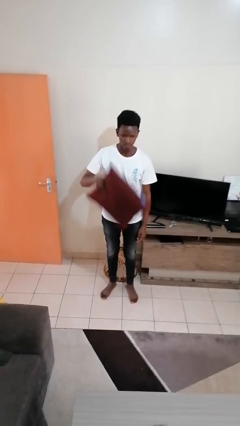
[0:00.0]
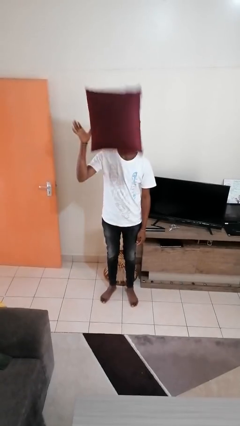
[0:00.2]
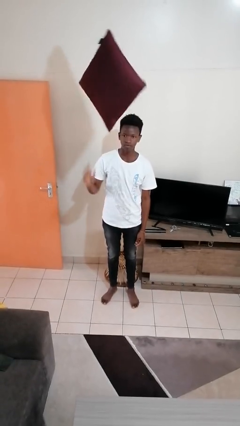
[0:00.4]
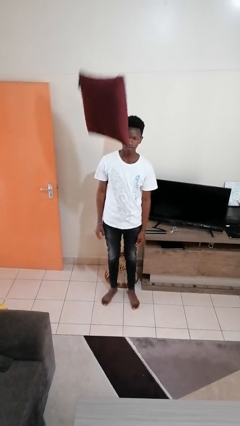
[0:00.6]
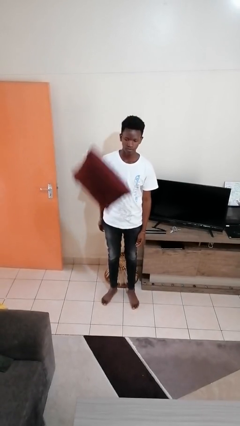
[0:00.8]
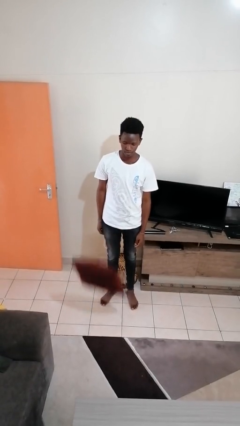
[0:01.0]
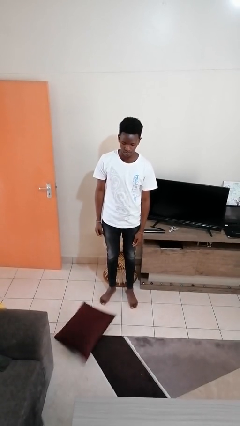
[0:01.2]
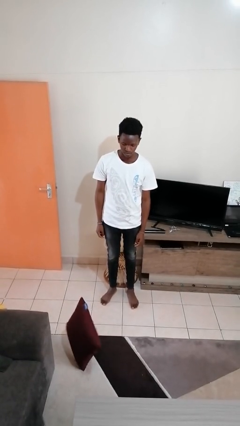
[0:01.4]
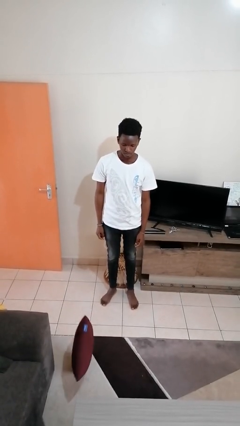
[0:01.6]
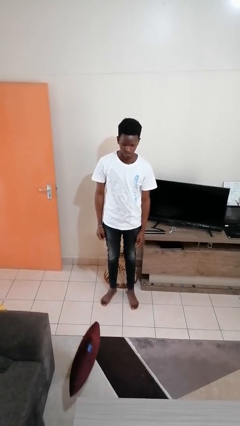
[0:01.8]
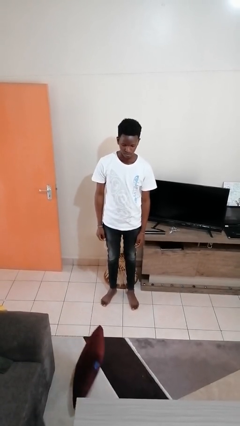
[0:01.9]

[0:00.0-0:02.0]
person throws object into air

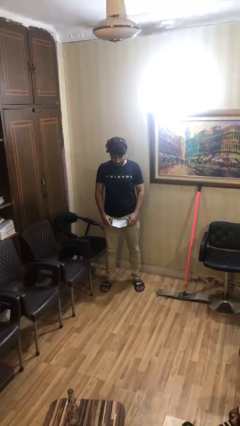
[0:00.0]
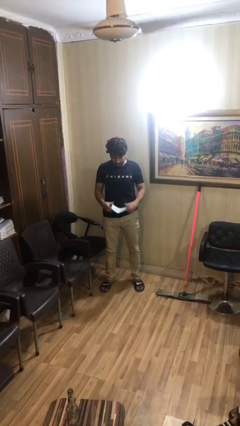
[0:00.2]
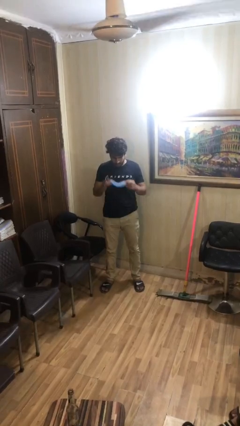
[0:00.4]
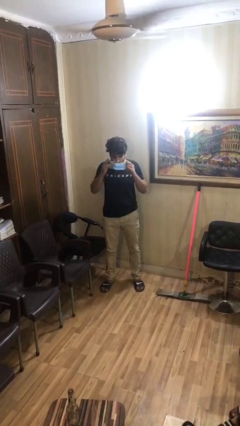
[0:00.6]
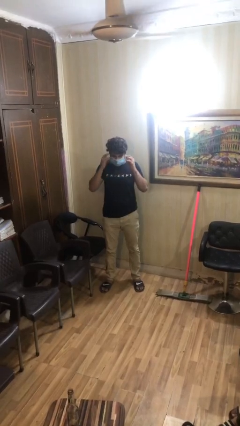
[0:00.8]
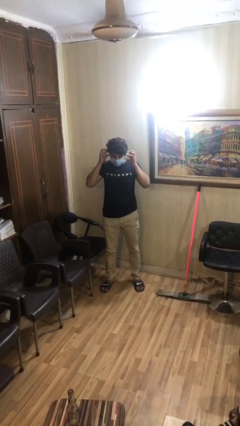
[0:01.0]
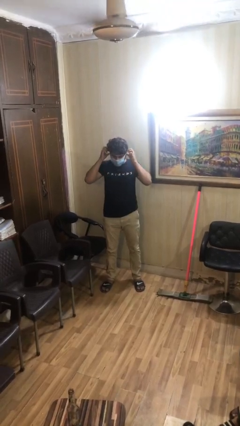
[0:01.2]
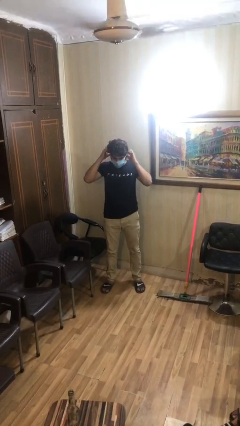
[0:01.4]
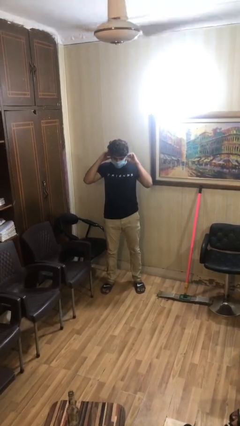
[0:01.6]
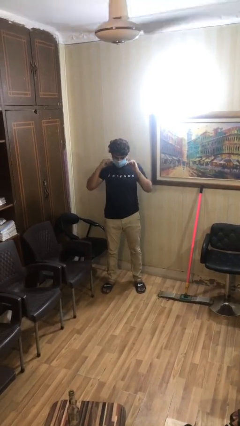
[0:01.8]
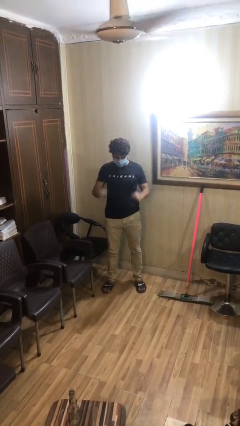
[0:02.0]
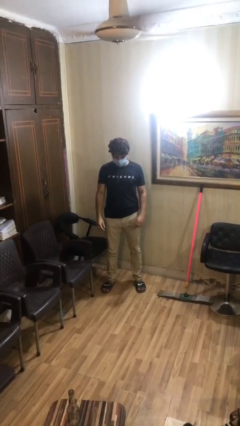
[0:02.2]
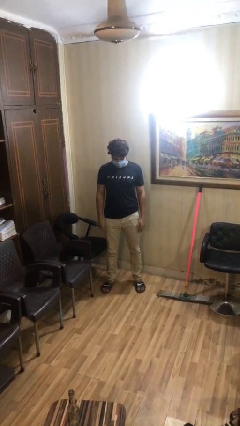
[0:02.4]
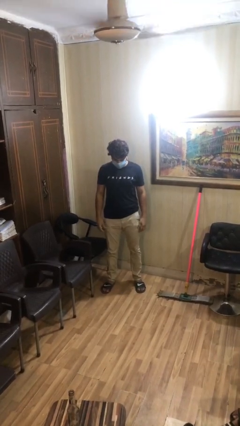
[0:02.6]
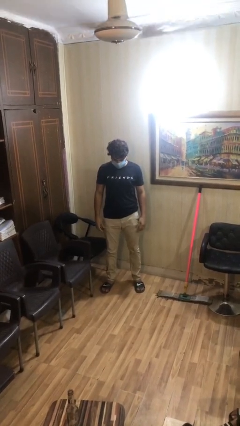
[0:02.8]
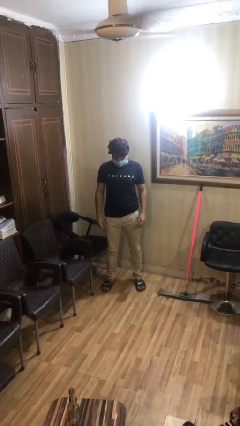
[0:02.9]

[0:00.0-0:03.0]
person puts on facemask

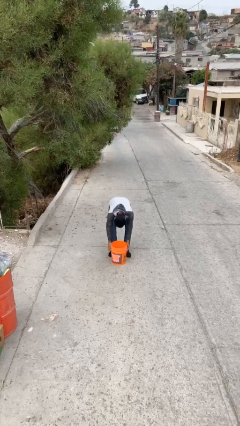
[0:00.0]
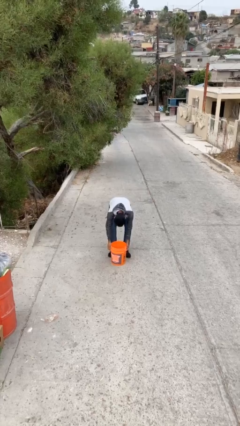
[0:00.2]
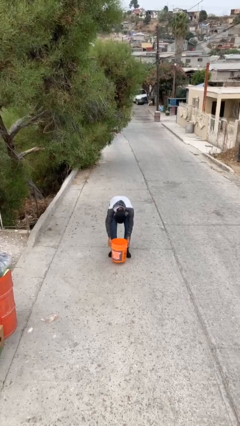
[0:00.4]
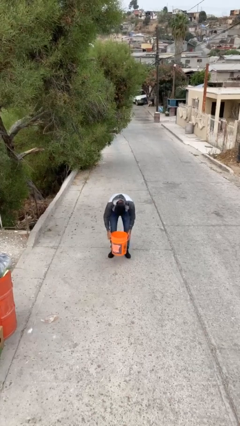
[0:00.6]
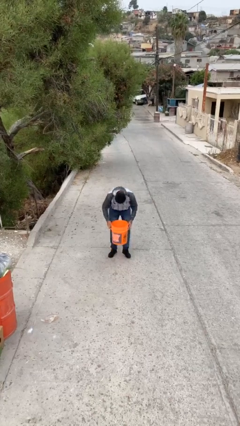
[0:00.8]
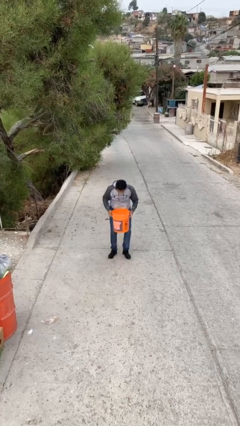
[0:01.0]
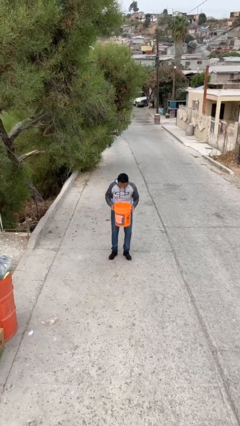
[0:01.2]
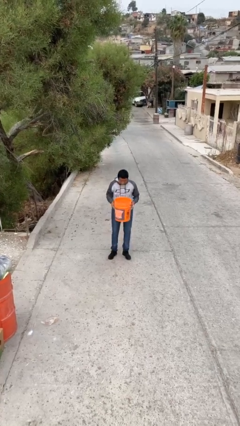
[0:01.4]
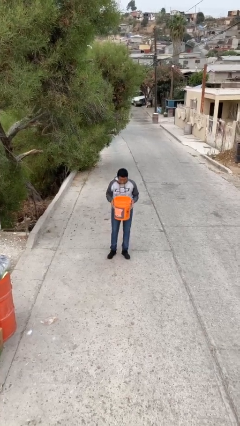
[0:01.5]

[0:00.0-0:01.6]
person picks up object from floor

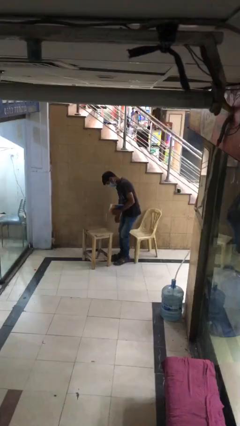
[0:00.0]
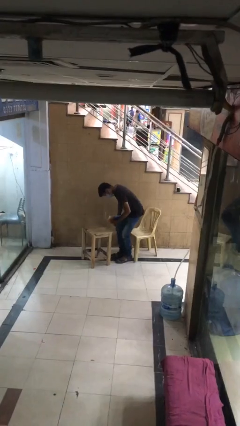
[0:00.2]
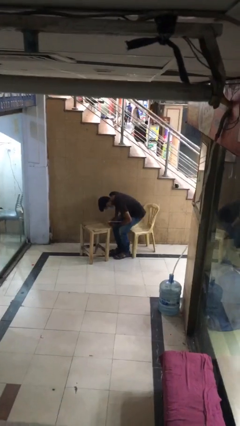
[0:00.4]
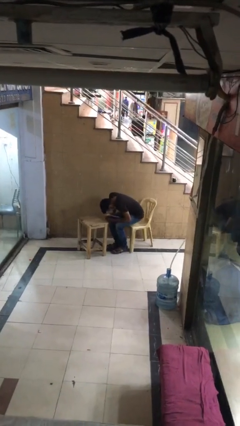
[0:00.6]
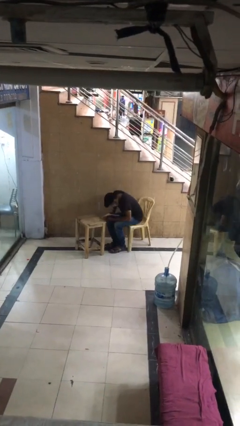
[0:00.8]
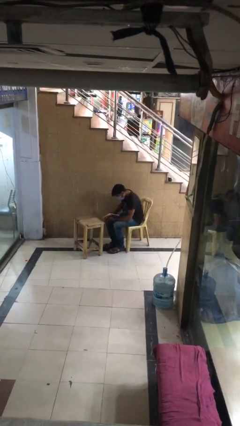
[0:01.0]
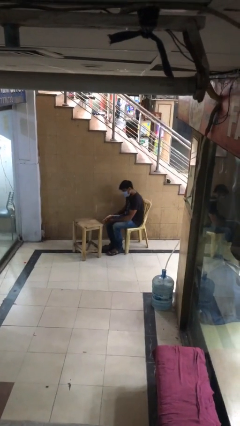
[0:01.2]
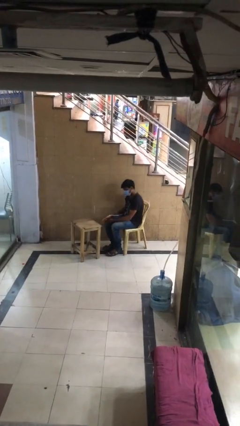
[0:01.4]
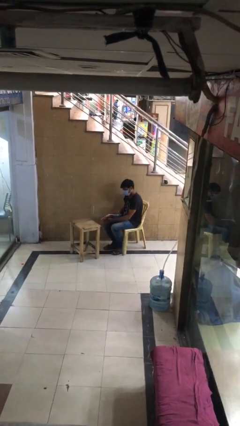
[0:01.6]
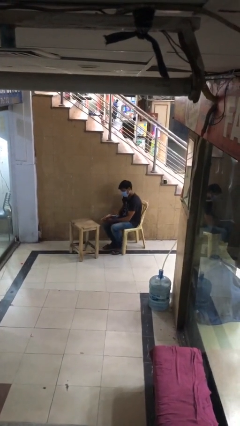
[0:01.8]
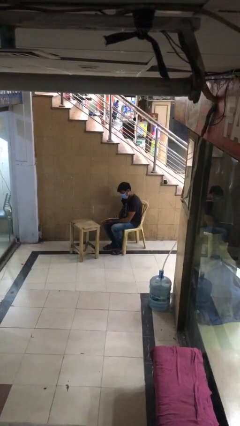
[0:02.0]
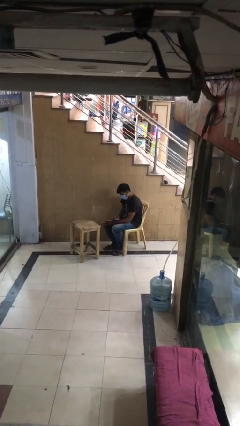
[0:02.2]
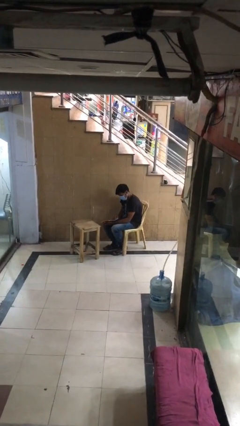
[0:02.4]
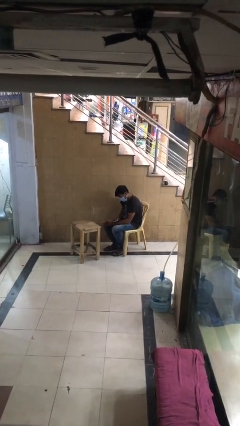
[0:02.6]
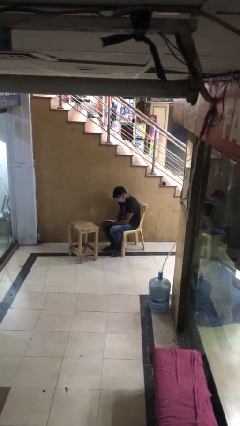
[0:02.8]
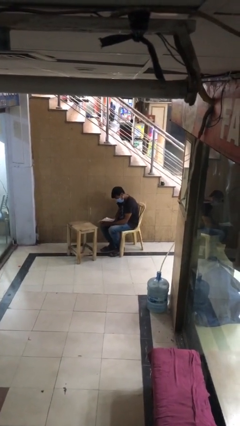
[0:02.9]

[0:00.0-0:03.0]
person sits down

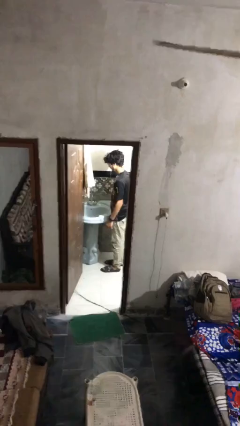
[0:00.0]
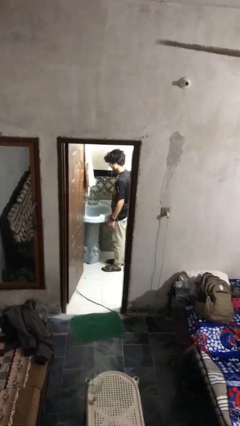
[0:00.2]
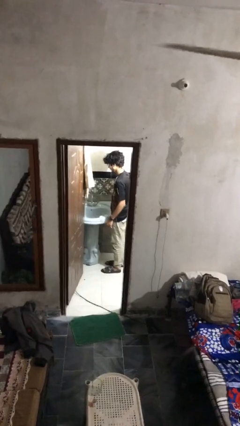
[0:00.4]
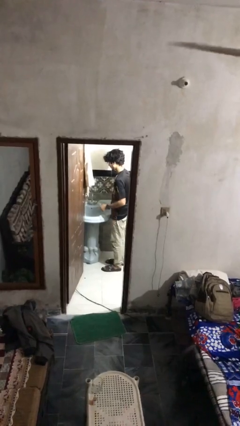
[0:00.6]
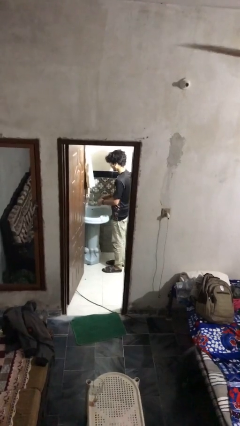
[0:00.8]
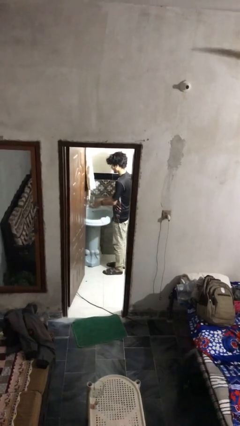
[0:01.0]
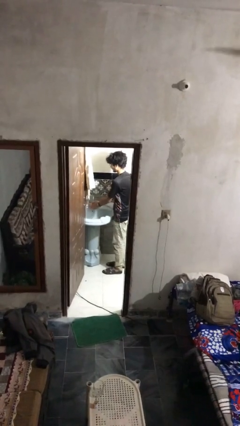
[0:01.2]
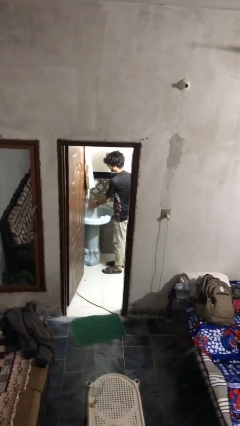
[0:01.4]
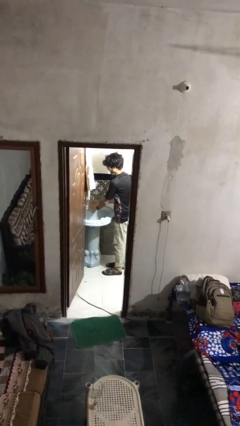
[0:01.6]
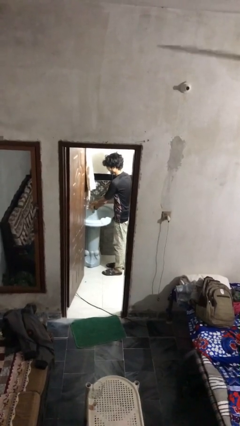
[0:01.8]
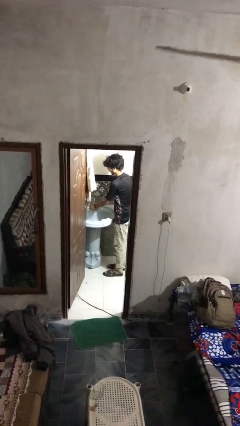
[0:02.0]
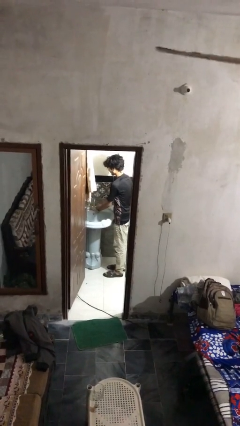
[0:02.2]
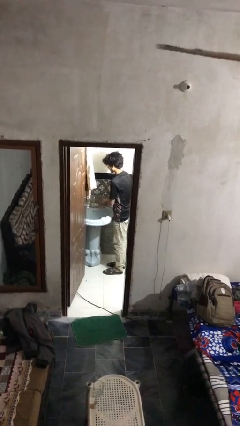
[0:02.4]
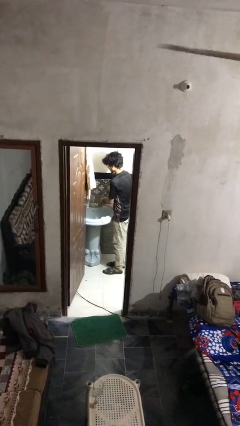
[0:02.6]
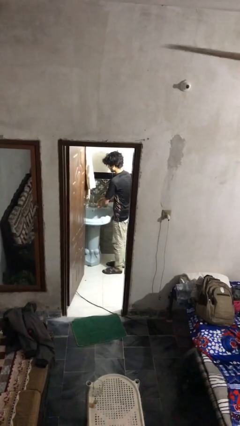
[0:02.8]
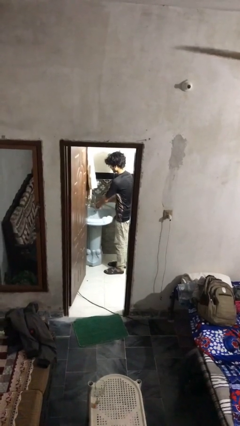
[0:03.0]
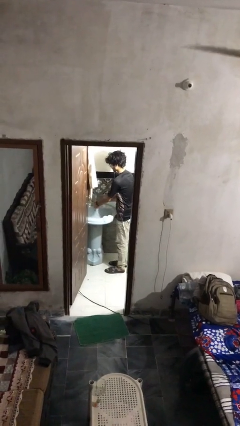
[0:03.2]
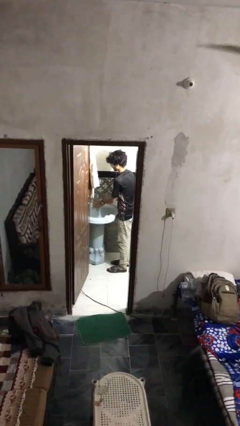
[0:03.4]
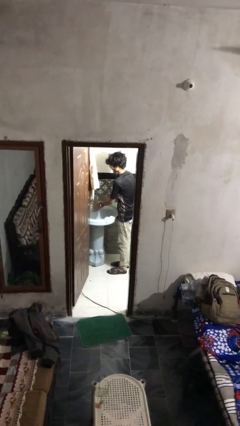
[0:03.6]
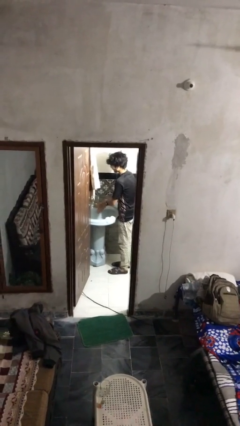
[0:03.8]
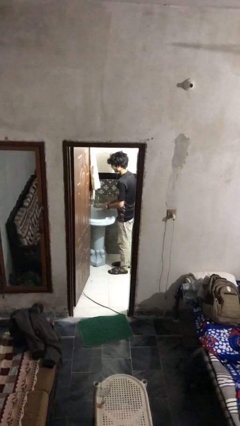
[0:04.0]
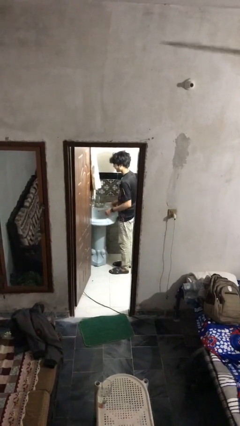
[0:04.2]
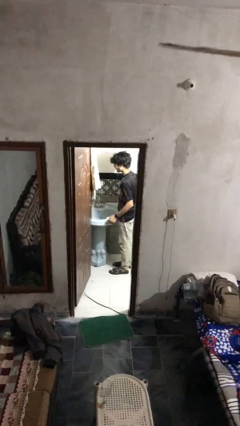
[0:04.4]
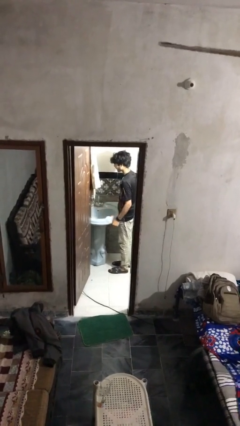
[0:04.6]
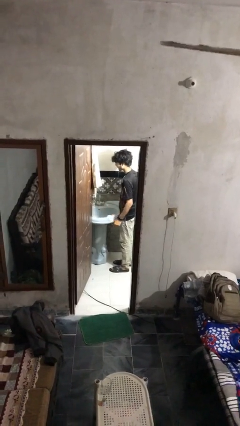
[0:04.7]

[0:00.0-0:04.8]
person washes hands

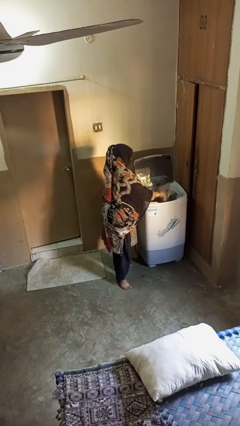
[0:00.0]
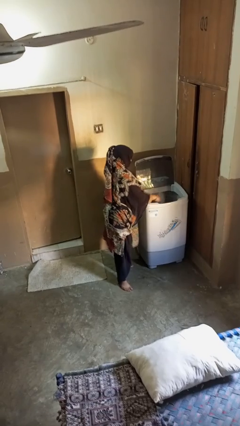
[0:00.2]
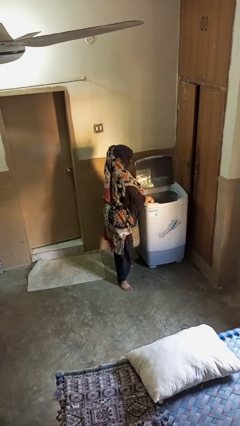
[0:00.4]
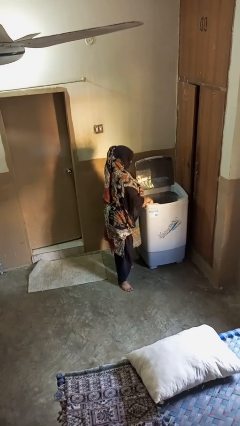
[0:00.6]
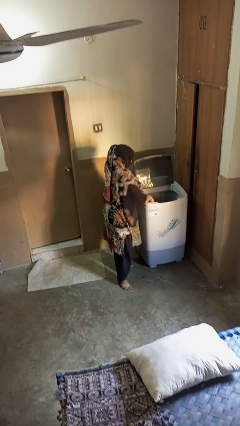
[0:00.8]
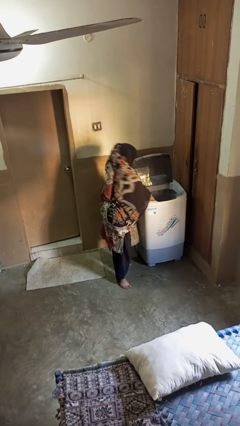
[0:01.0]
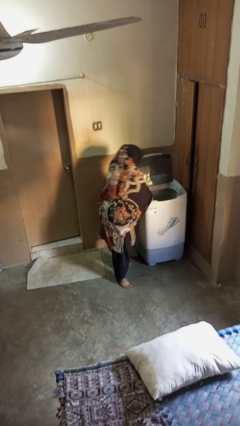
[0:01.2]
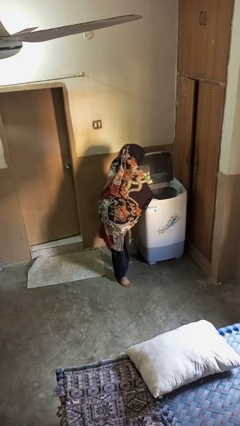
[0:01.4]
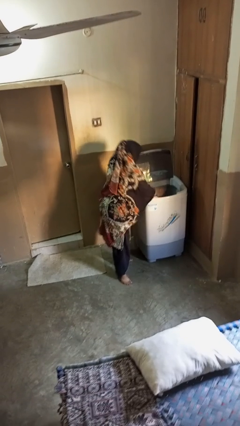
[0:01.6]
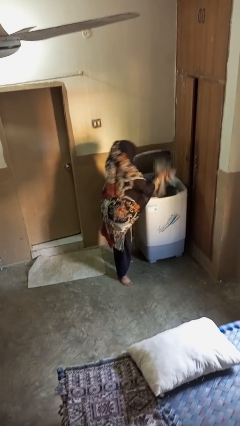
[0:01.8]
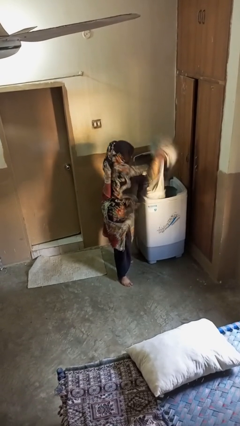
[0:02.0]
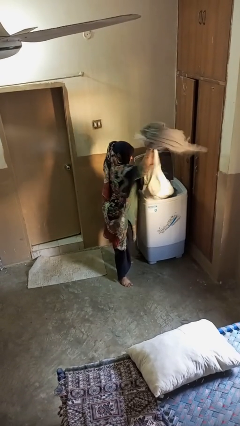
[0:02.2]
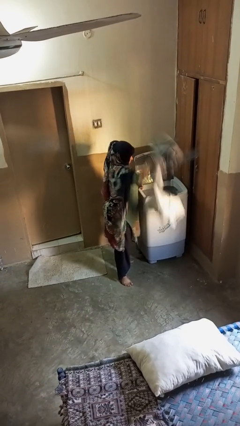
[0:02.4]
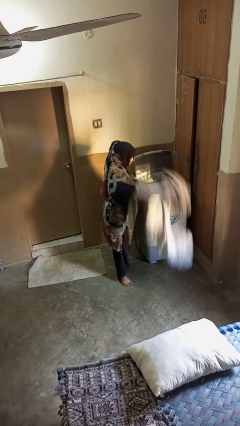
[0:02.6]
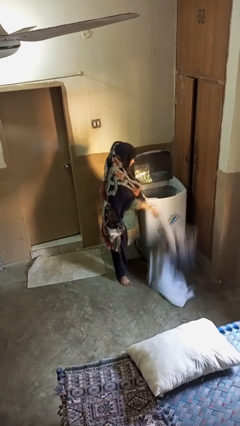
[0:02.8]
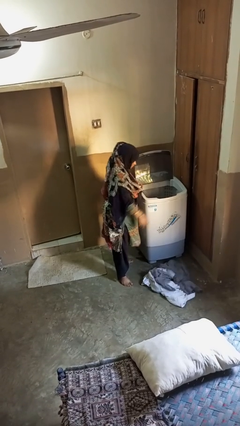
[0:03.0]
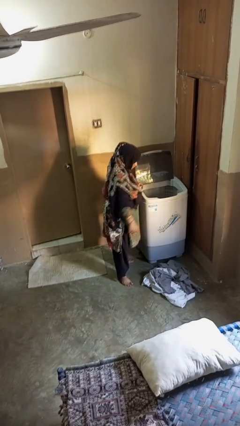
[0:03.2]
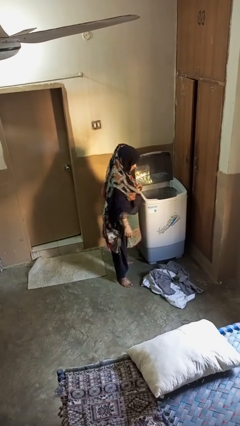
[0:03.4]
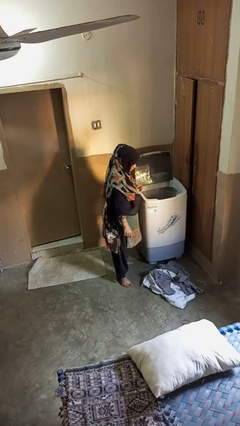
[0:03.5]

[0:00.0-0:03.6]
person unloads clotheswasher
